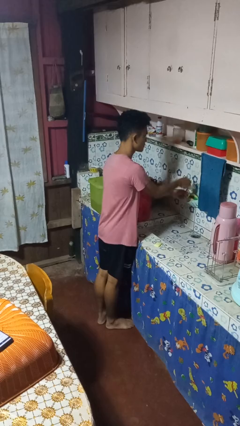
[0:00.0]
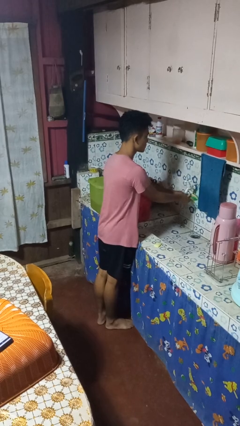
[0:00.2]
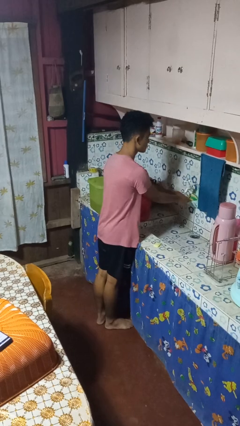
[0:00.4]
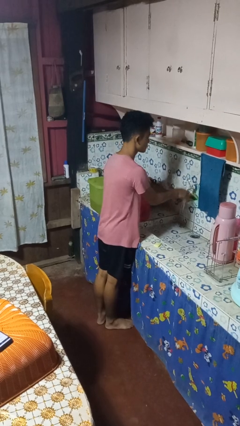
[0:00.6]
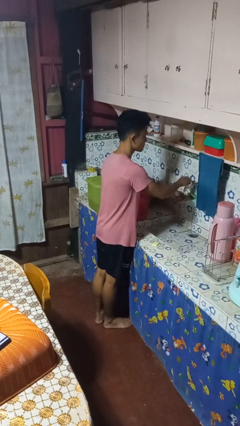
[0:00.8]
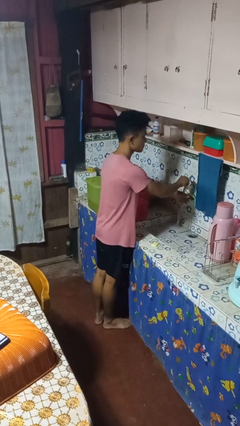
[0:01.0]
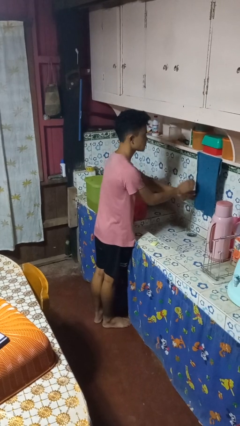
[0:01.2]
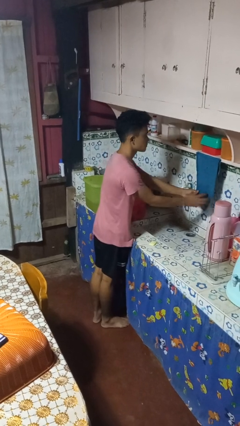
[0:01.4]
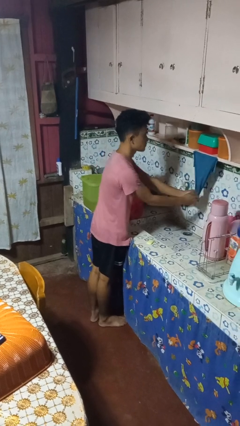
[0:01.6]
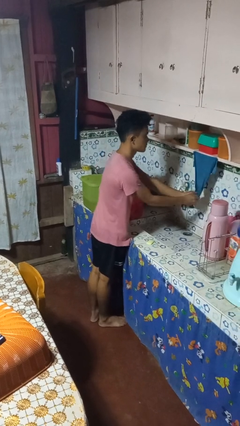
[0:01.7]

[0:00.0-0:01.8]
person washes hands

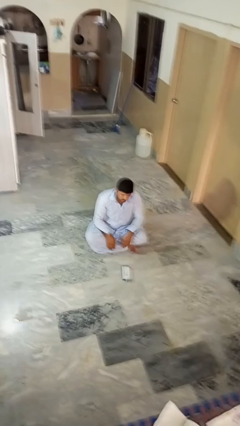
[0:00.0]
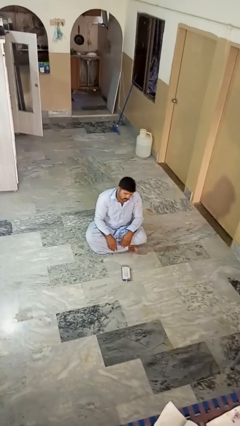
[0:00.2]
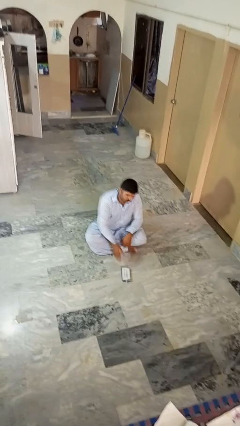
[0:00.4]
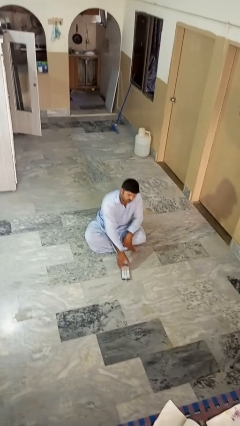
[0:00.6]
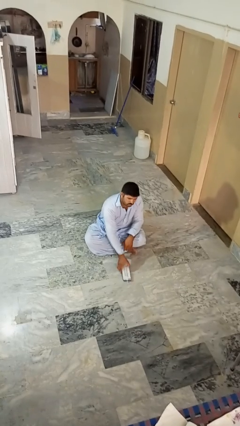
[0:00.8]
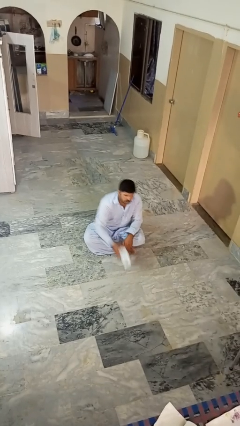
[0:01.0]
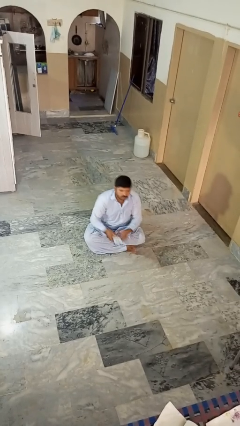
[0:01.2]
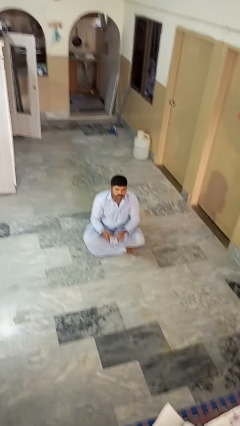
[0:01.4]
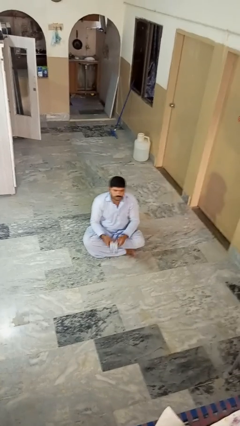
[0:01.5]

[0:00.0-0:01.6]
person picks up object from floor

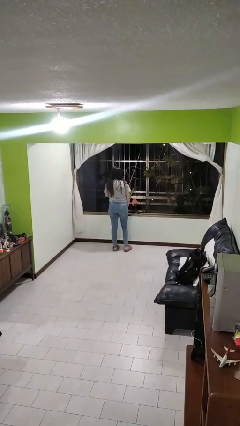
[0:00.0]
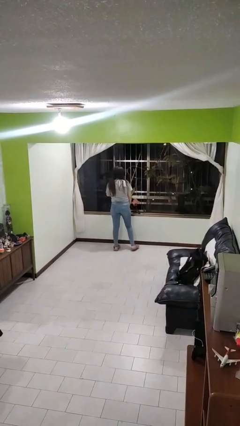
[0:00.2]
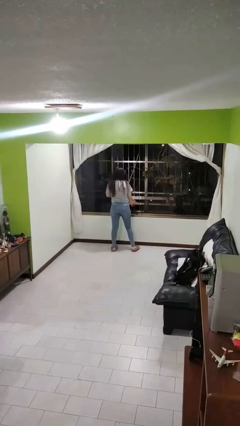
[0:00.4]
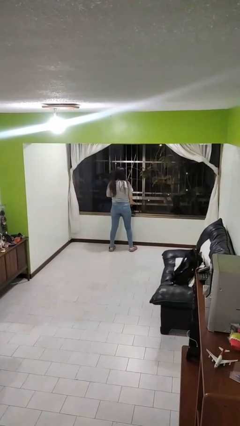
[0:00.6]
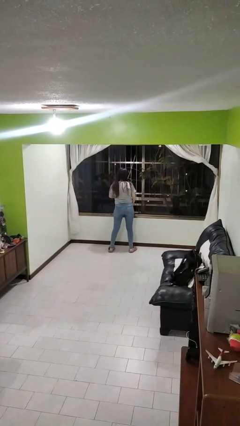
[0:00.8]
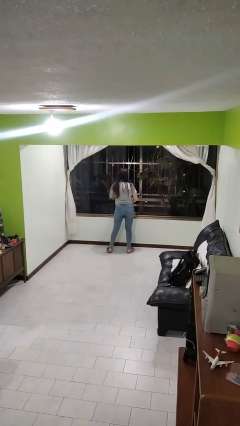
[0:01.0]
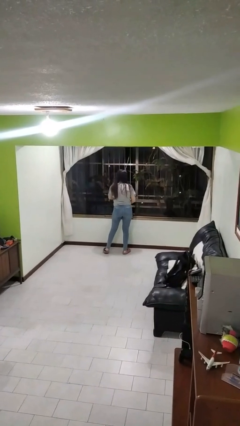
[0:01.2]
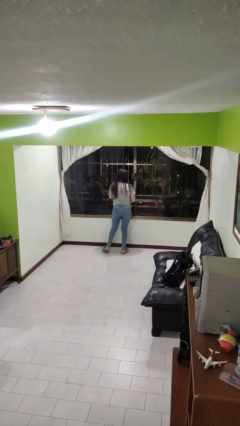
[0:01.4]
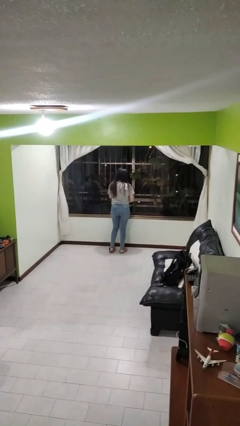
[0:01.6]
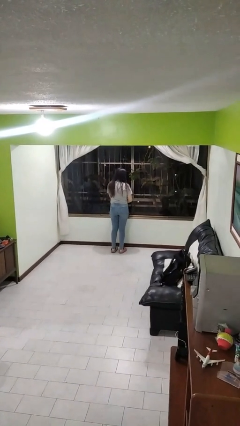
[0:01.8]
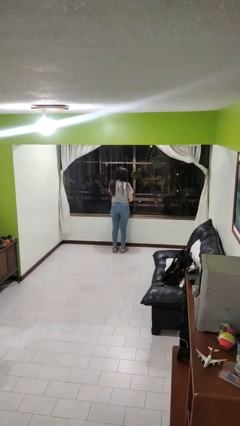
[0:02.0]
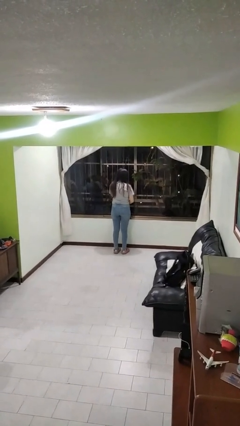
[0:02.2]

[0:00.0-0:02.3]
person closes home window

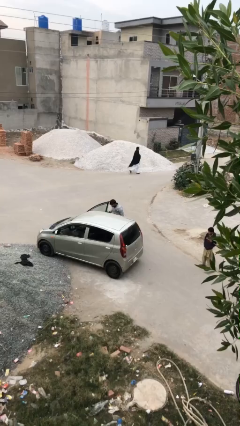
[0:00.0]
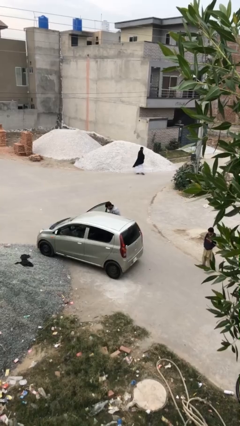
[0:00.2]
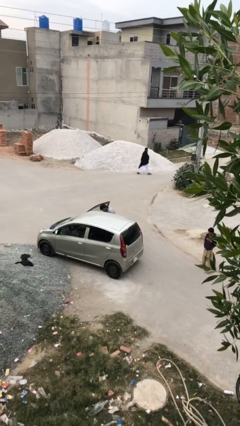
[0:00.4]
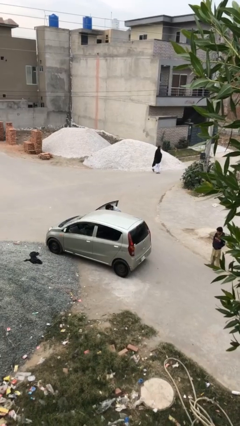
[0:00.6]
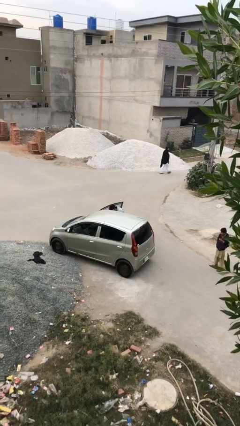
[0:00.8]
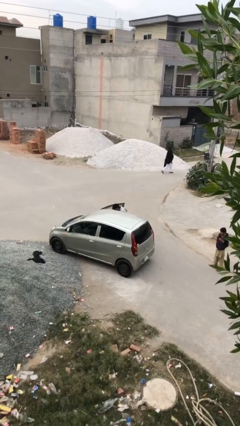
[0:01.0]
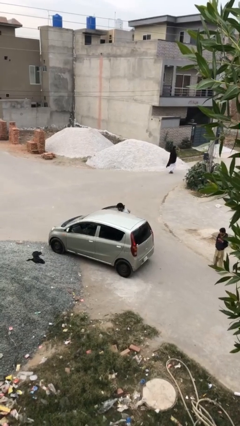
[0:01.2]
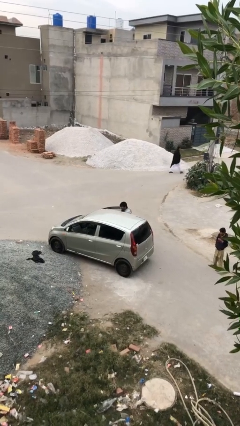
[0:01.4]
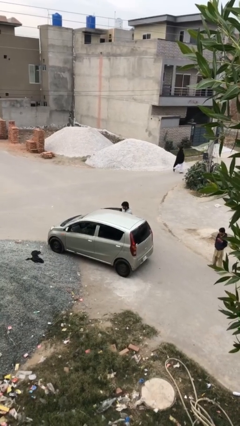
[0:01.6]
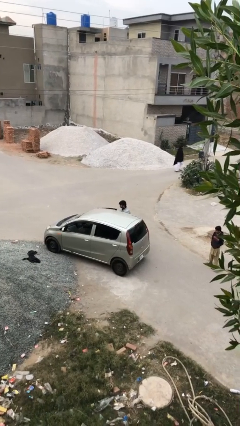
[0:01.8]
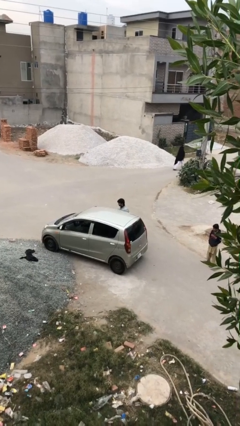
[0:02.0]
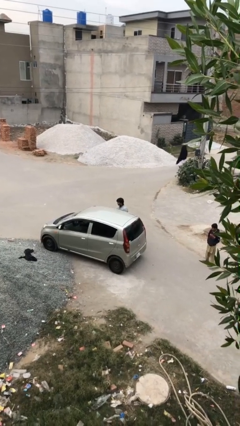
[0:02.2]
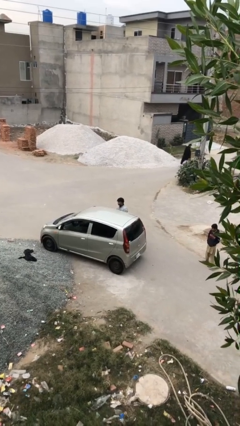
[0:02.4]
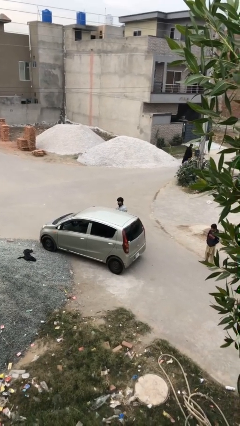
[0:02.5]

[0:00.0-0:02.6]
person closes car door

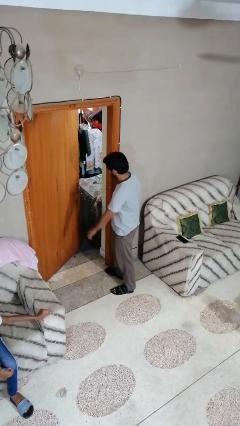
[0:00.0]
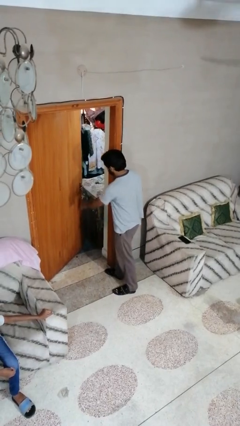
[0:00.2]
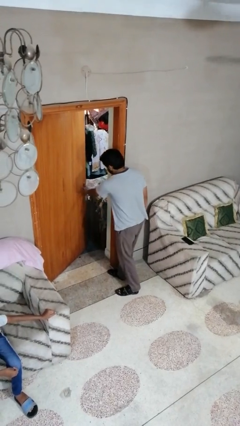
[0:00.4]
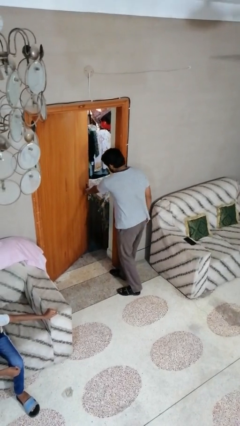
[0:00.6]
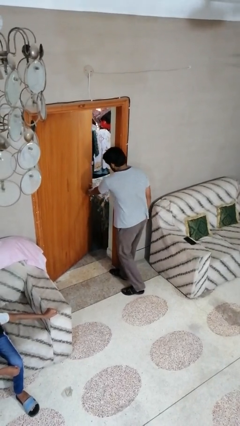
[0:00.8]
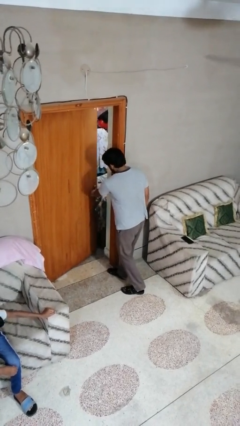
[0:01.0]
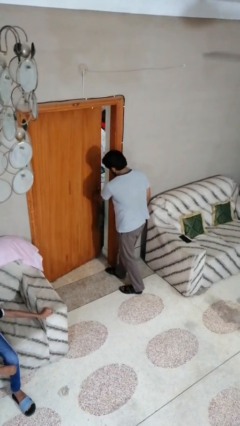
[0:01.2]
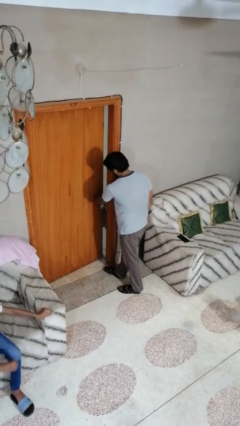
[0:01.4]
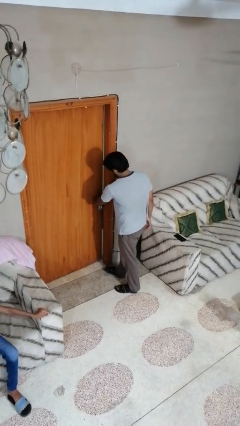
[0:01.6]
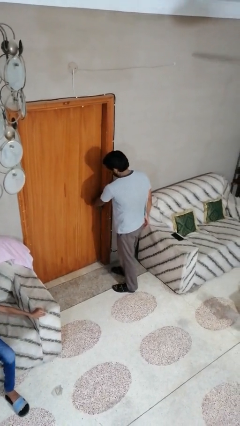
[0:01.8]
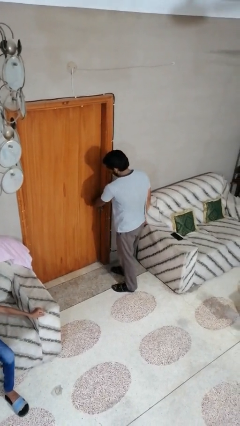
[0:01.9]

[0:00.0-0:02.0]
person closes facility door

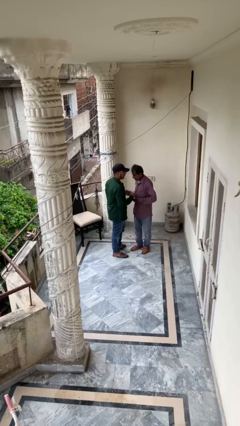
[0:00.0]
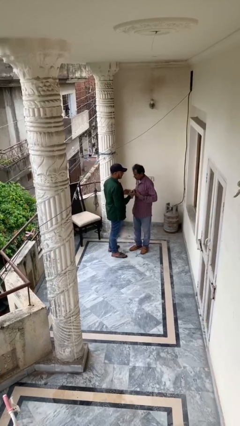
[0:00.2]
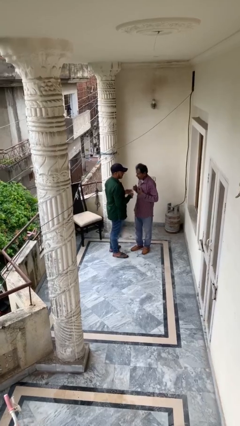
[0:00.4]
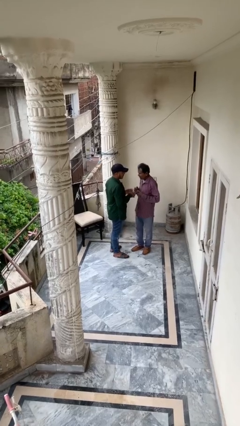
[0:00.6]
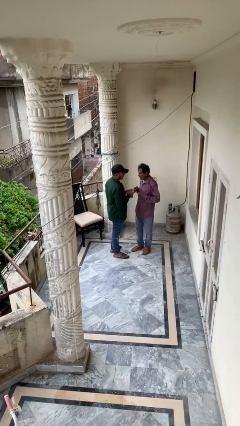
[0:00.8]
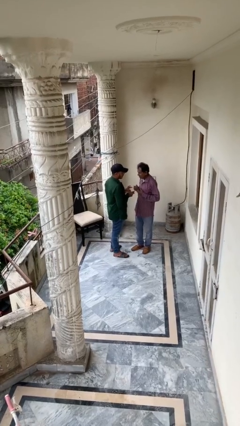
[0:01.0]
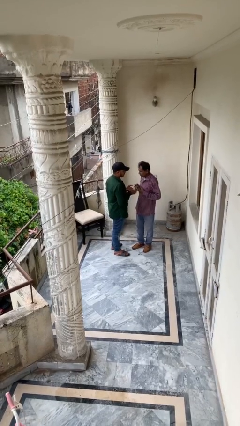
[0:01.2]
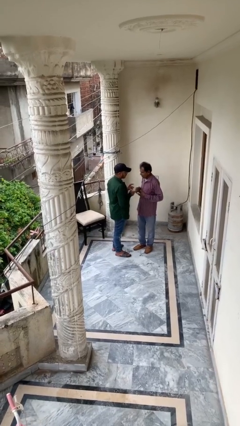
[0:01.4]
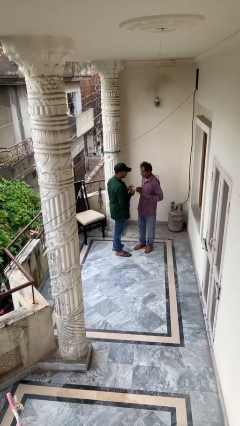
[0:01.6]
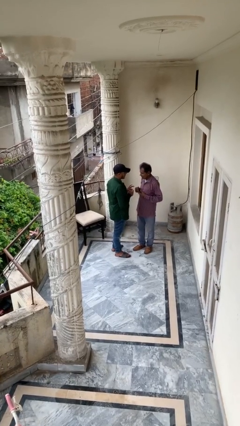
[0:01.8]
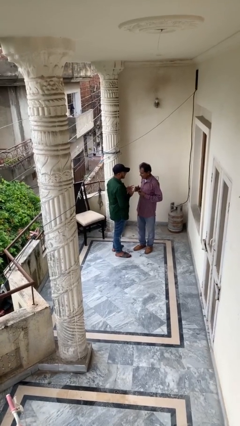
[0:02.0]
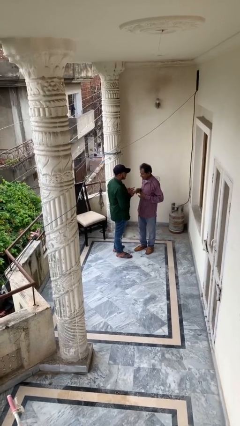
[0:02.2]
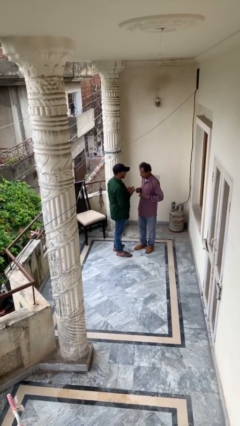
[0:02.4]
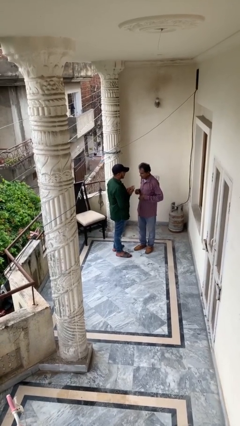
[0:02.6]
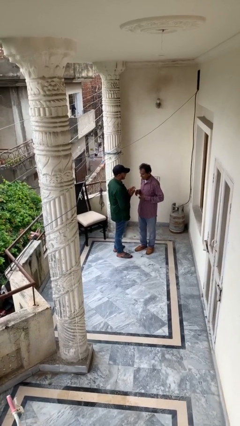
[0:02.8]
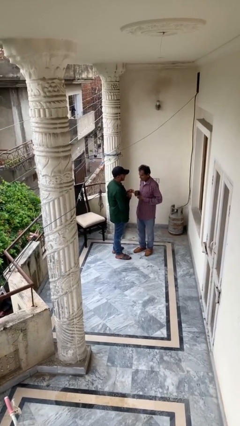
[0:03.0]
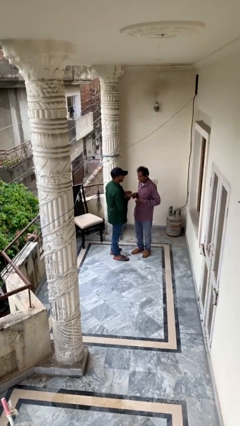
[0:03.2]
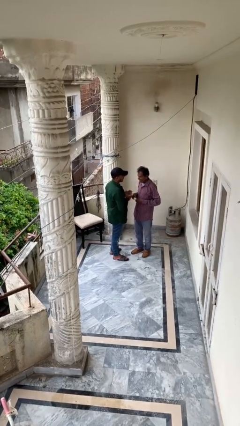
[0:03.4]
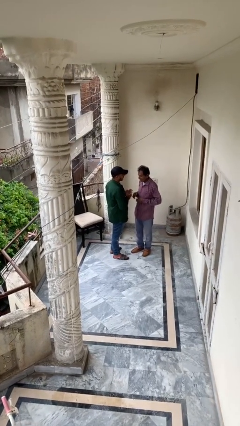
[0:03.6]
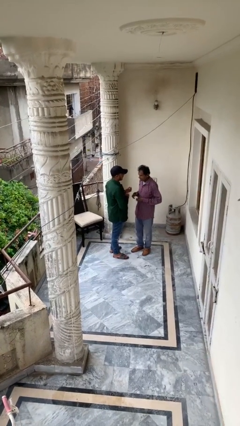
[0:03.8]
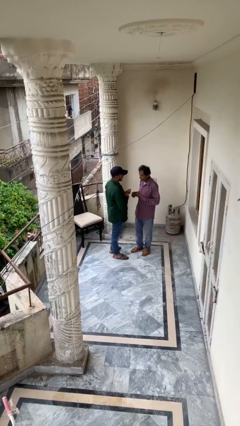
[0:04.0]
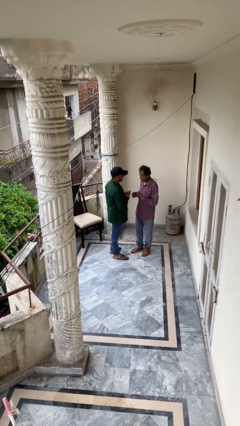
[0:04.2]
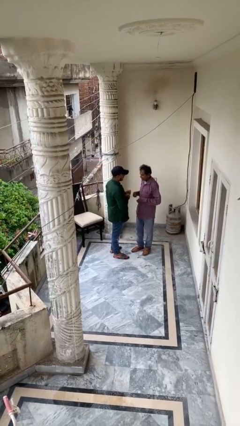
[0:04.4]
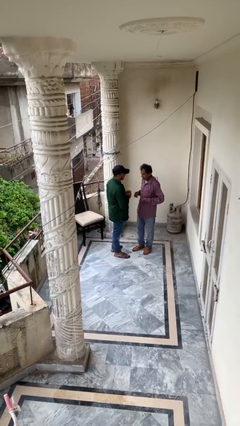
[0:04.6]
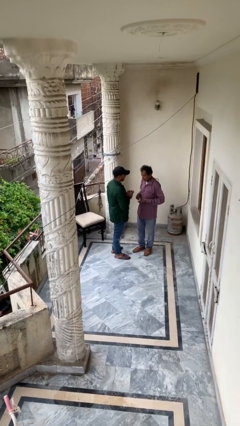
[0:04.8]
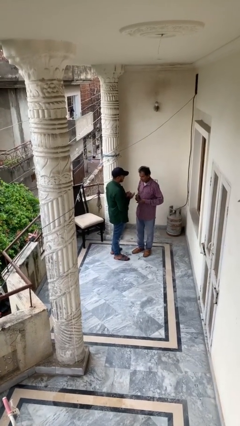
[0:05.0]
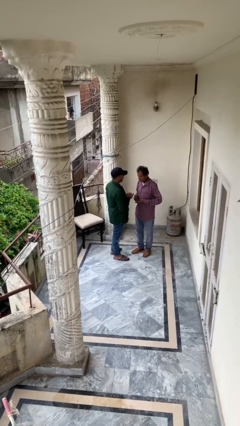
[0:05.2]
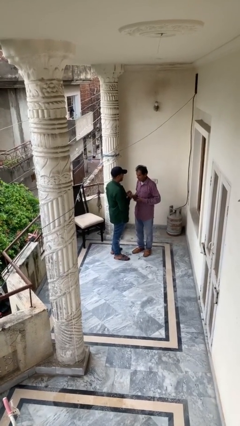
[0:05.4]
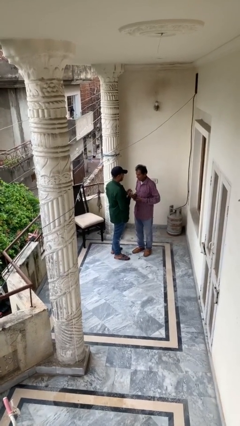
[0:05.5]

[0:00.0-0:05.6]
person talks to person

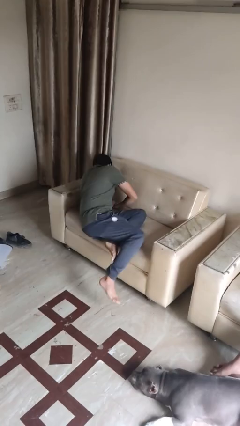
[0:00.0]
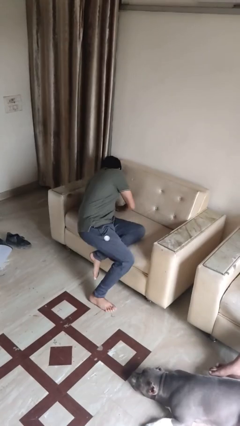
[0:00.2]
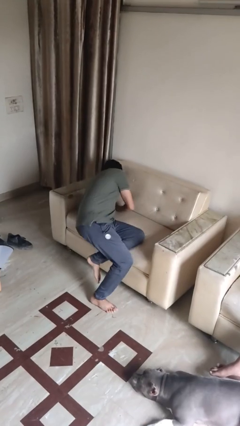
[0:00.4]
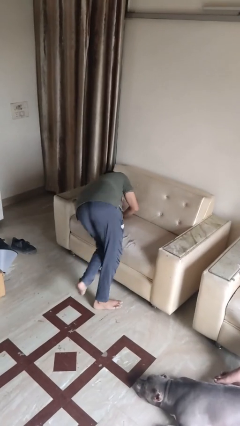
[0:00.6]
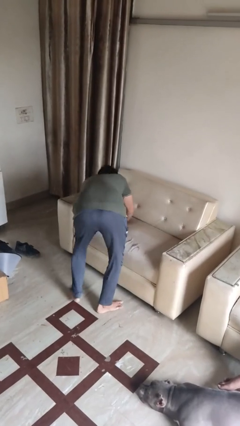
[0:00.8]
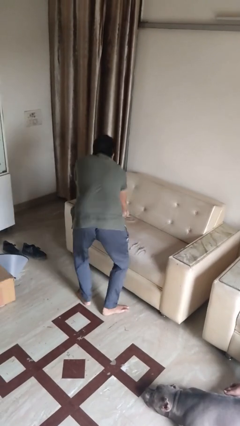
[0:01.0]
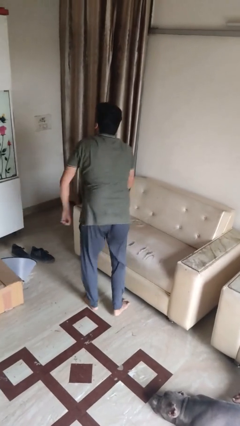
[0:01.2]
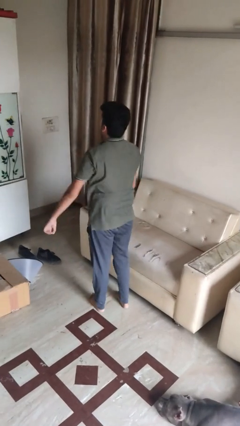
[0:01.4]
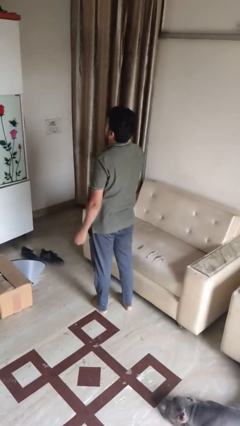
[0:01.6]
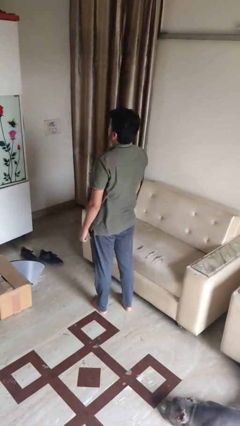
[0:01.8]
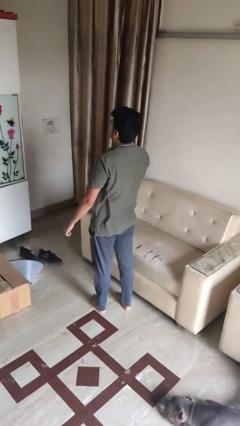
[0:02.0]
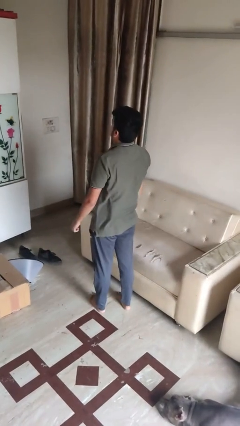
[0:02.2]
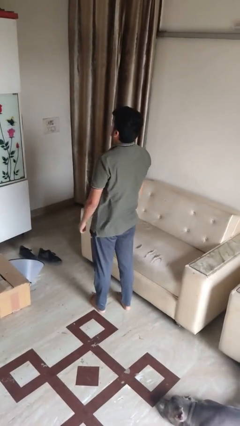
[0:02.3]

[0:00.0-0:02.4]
person stands up
